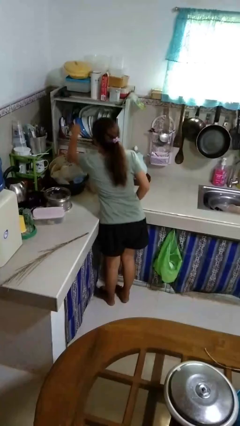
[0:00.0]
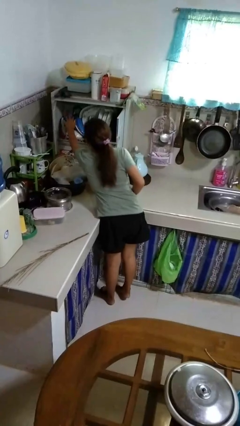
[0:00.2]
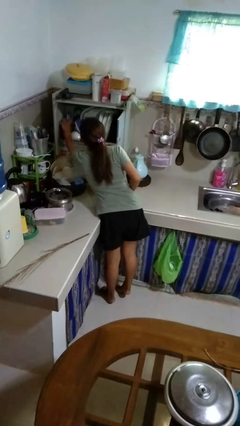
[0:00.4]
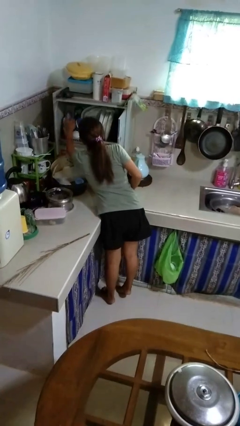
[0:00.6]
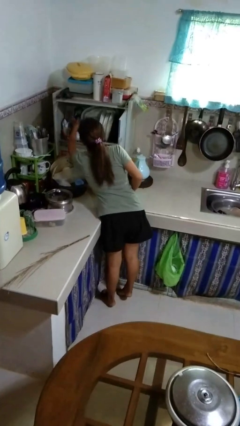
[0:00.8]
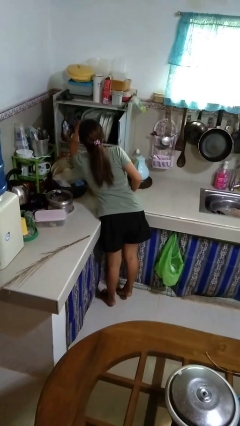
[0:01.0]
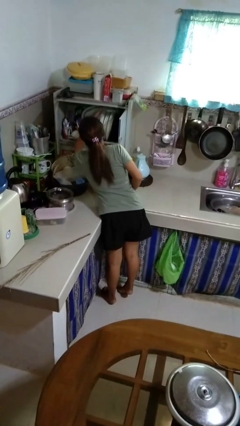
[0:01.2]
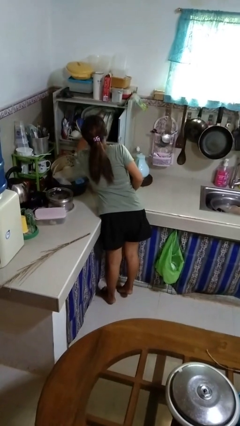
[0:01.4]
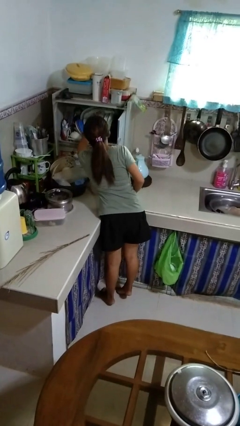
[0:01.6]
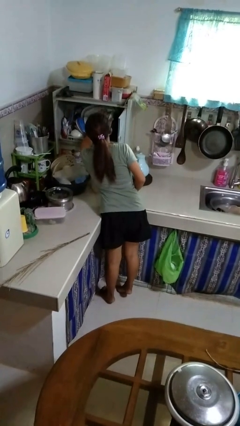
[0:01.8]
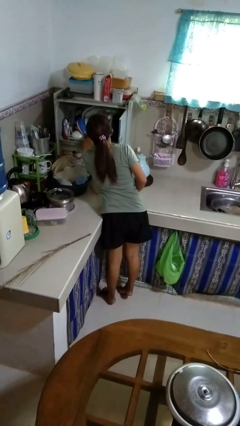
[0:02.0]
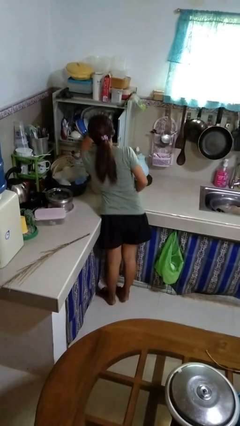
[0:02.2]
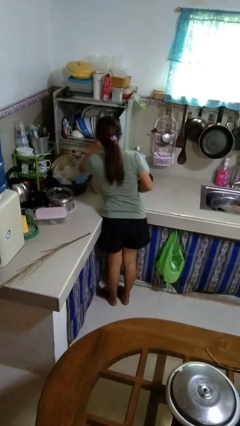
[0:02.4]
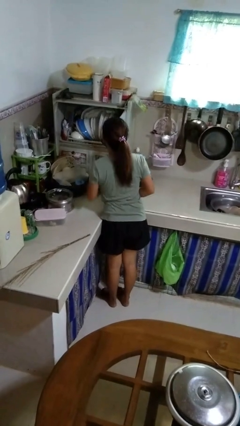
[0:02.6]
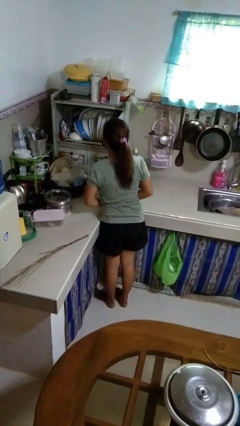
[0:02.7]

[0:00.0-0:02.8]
person searches in kitchen drawer

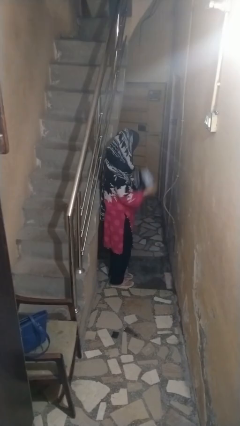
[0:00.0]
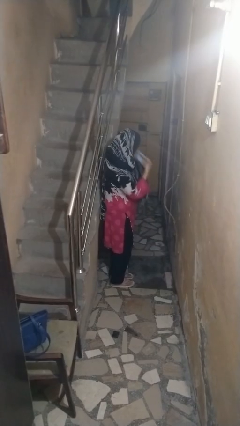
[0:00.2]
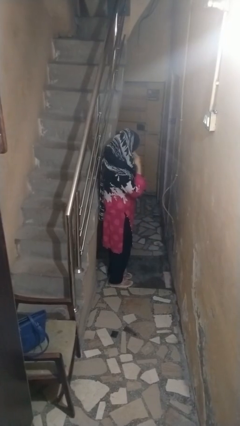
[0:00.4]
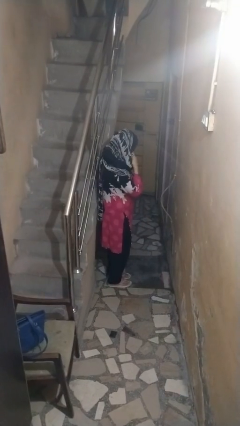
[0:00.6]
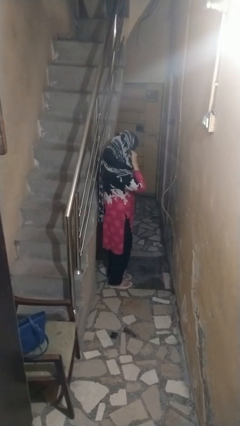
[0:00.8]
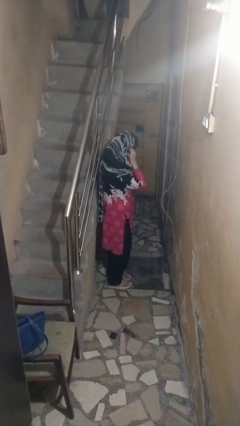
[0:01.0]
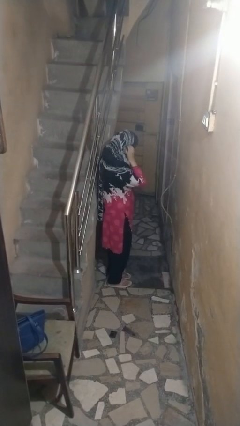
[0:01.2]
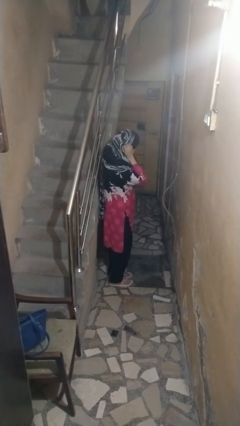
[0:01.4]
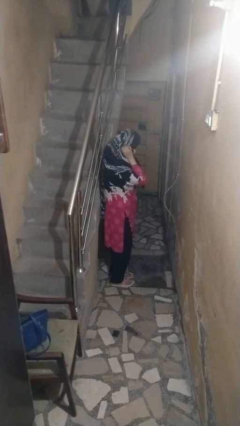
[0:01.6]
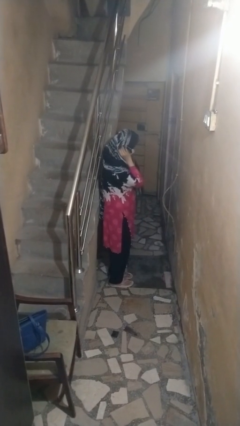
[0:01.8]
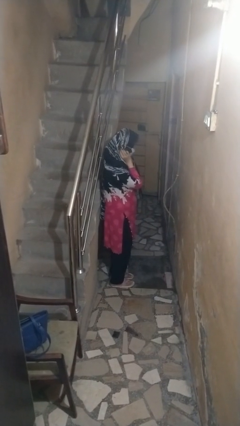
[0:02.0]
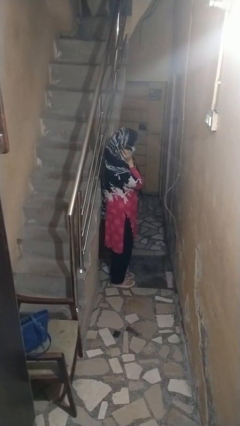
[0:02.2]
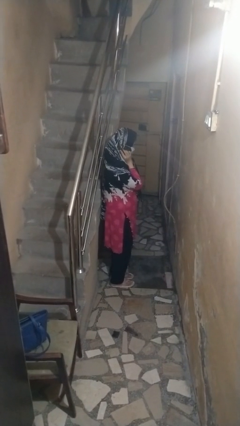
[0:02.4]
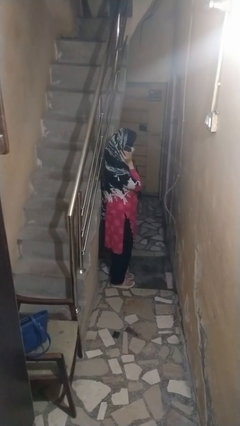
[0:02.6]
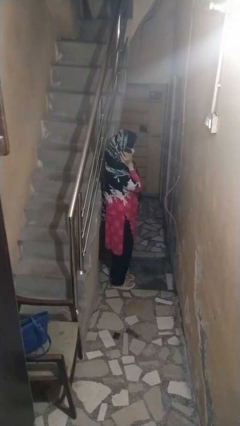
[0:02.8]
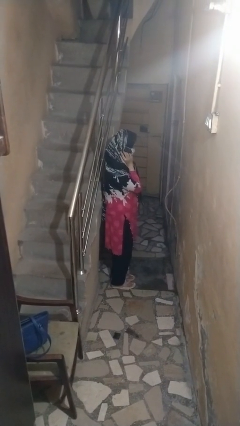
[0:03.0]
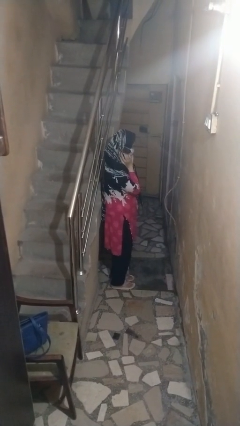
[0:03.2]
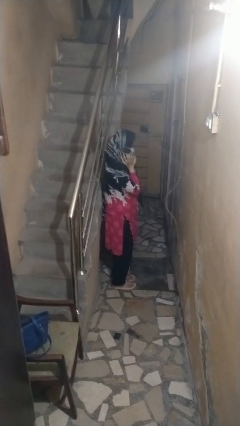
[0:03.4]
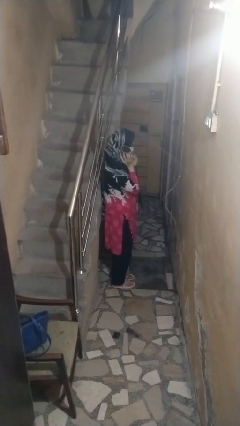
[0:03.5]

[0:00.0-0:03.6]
person puts on facemask

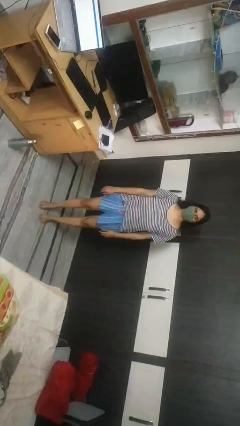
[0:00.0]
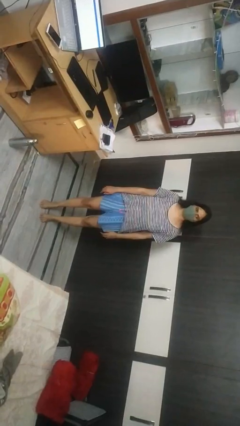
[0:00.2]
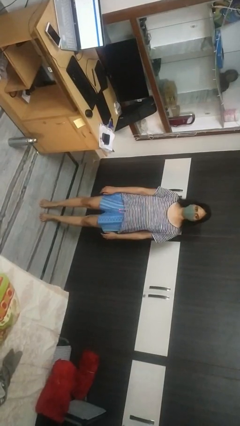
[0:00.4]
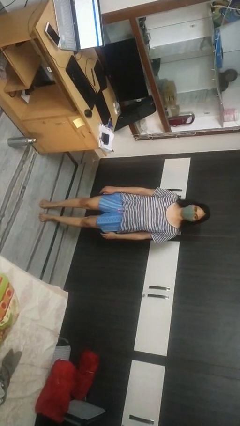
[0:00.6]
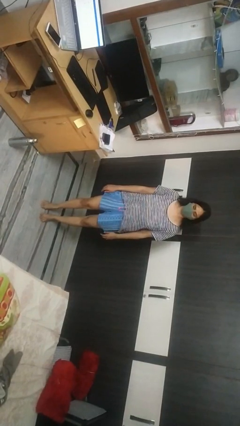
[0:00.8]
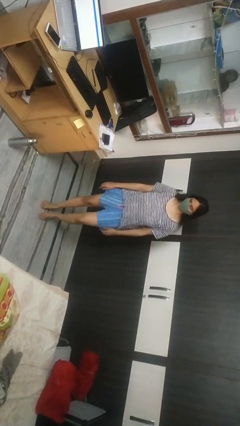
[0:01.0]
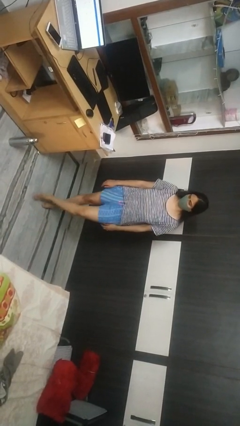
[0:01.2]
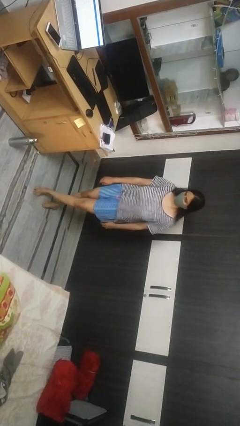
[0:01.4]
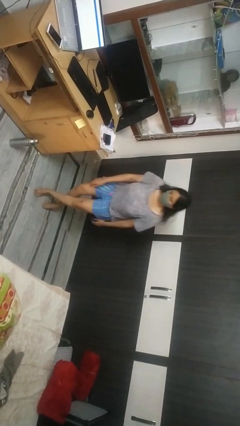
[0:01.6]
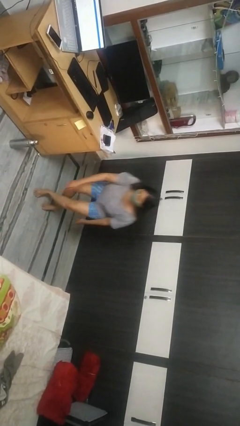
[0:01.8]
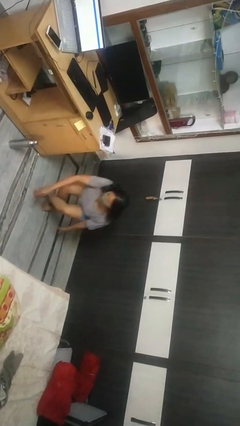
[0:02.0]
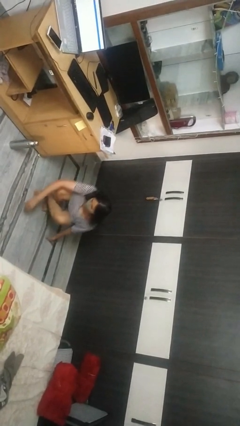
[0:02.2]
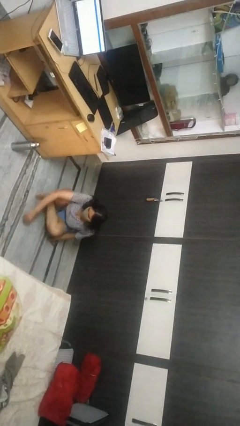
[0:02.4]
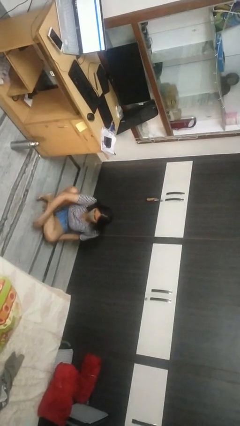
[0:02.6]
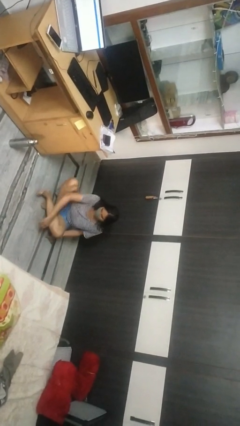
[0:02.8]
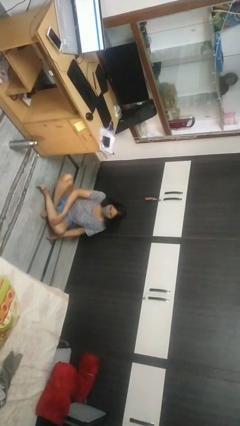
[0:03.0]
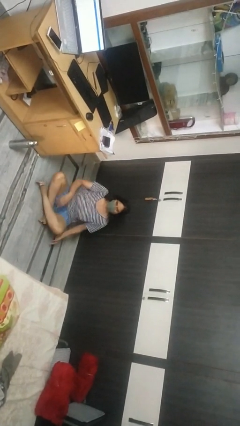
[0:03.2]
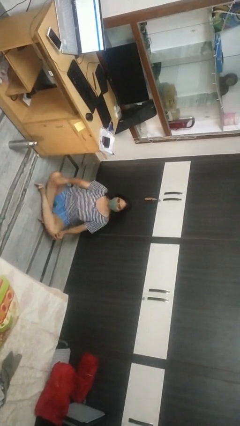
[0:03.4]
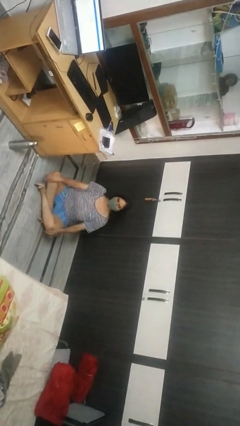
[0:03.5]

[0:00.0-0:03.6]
person sits crisscross

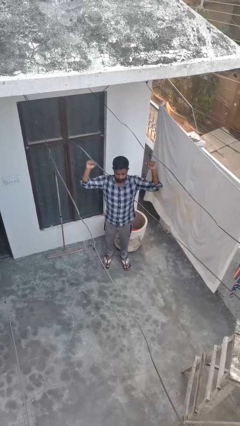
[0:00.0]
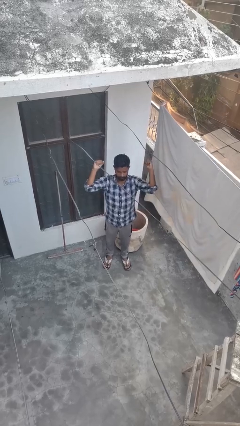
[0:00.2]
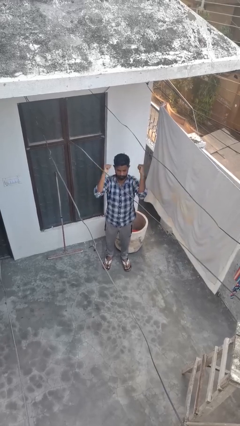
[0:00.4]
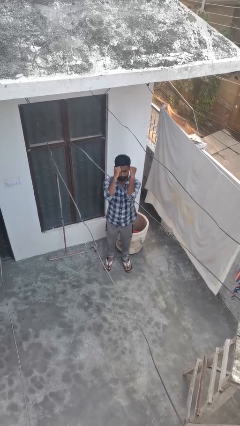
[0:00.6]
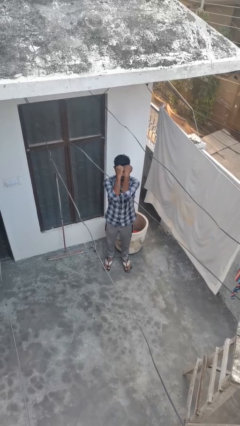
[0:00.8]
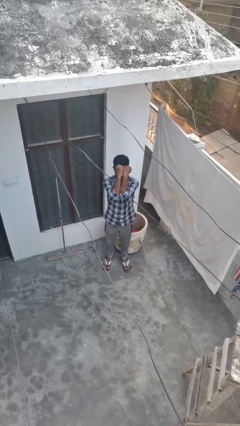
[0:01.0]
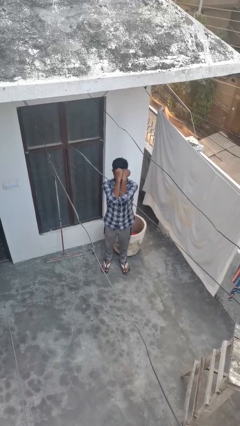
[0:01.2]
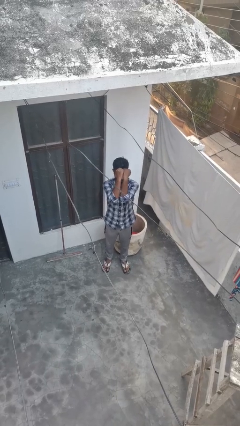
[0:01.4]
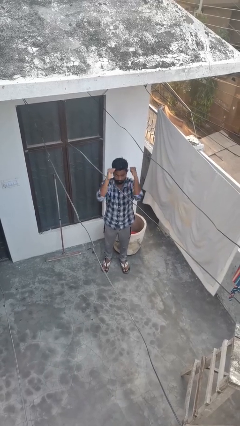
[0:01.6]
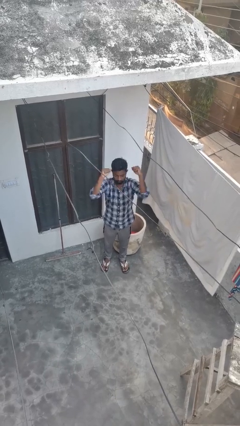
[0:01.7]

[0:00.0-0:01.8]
person gestures zoom in

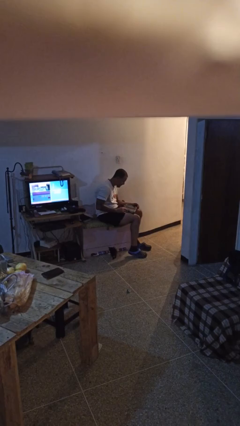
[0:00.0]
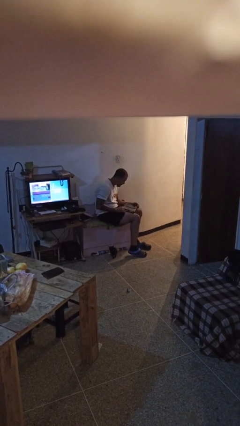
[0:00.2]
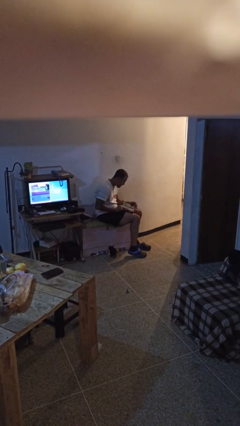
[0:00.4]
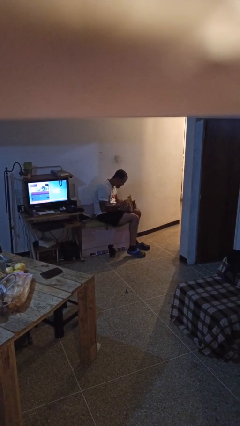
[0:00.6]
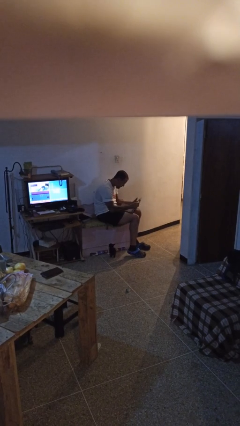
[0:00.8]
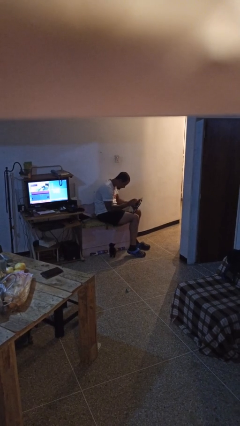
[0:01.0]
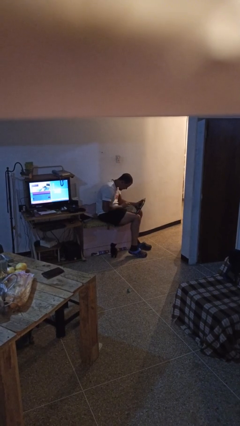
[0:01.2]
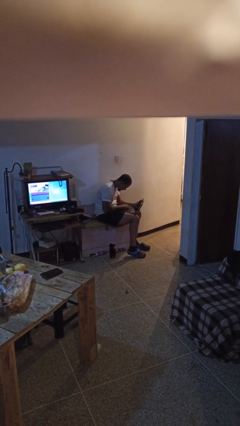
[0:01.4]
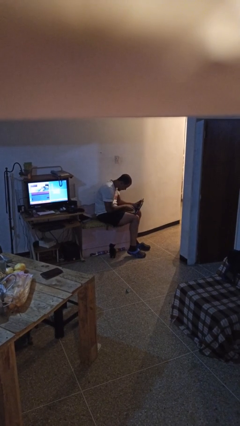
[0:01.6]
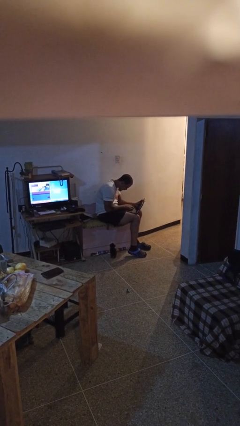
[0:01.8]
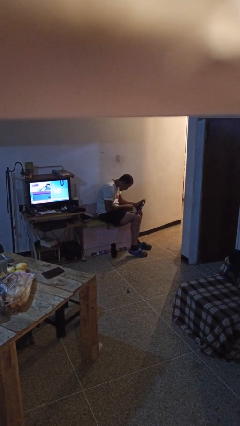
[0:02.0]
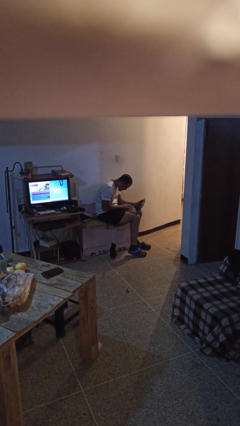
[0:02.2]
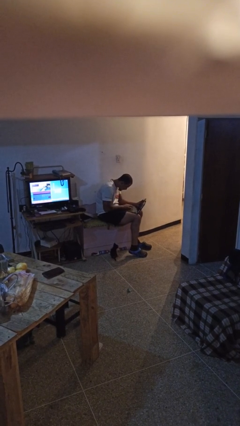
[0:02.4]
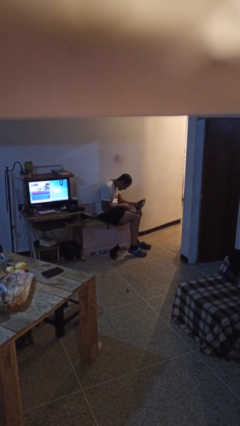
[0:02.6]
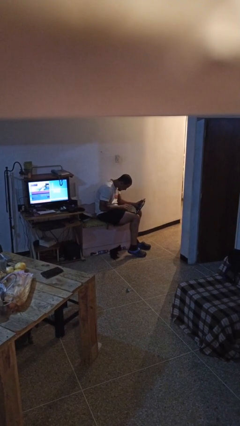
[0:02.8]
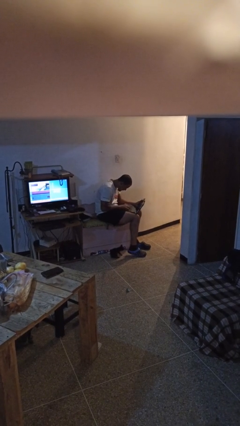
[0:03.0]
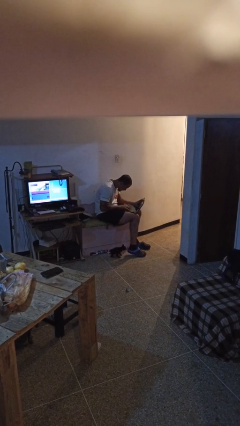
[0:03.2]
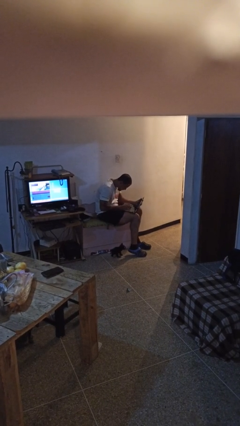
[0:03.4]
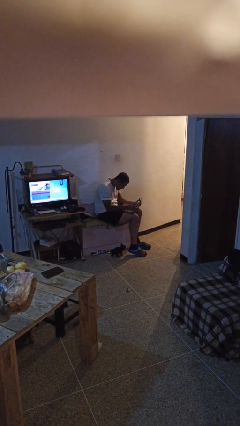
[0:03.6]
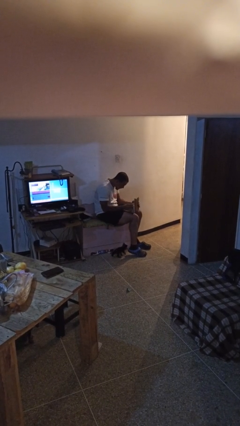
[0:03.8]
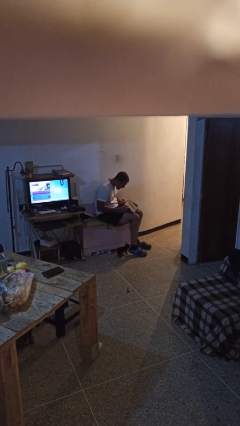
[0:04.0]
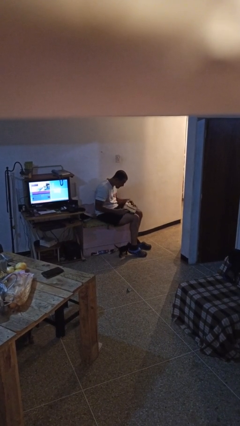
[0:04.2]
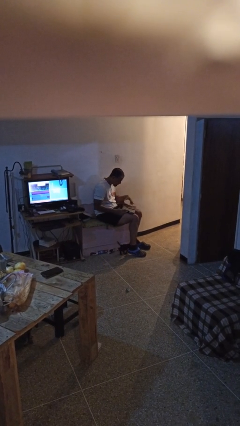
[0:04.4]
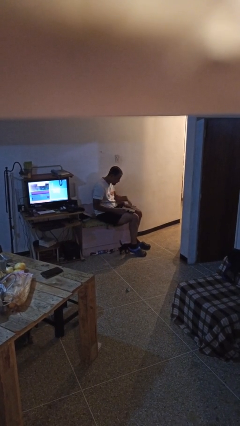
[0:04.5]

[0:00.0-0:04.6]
person interacts with laptop

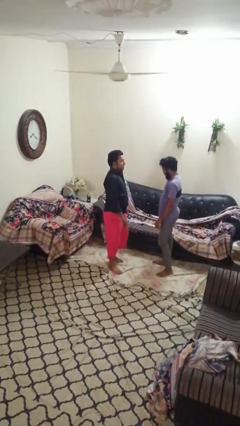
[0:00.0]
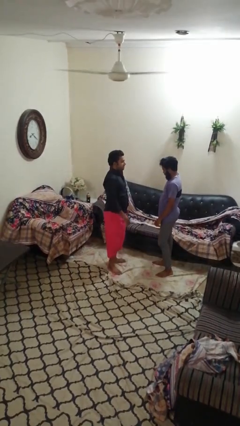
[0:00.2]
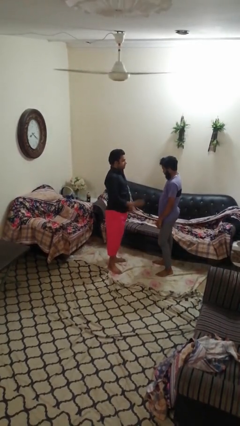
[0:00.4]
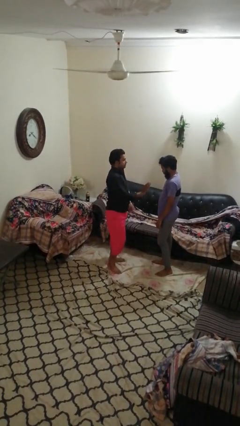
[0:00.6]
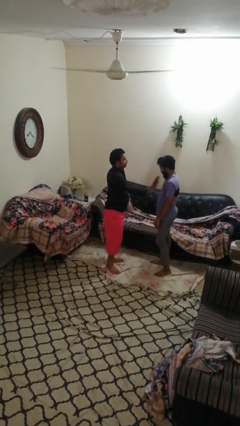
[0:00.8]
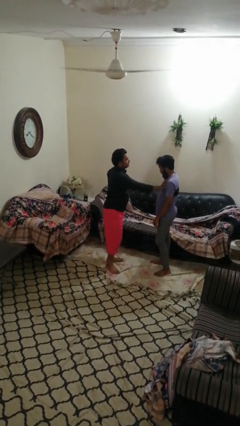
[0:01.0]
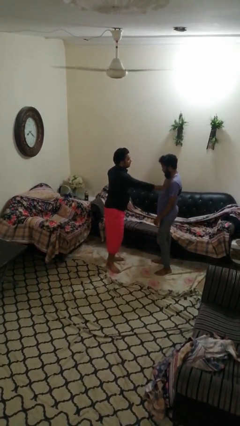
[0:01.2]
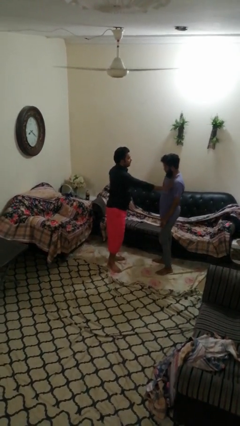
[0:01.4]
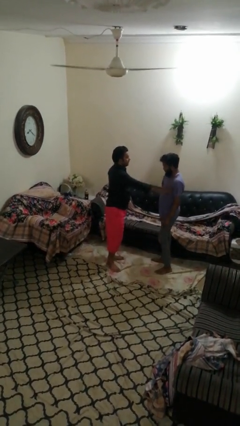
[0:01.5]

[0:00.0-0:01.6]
person shoves person
